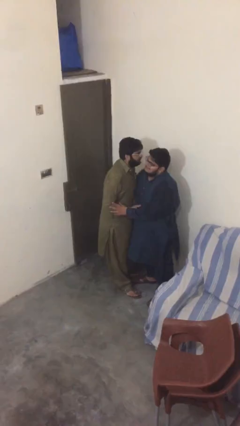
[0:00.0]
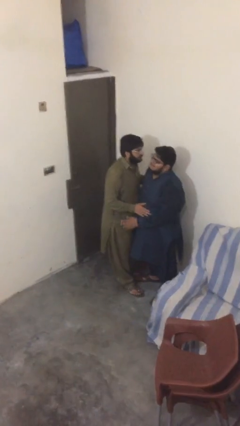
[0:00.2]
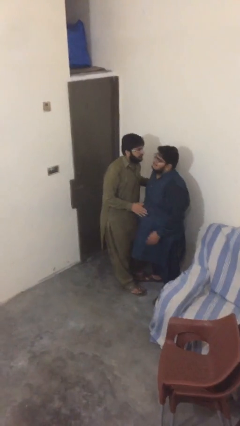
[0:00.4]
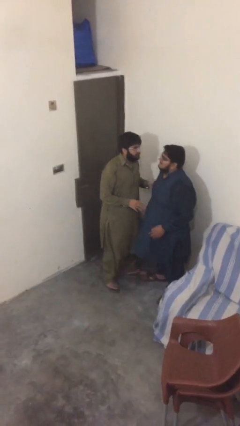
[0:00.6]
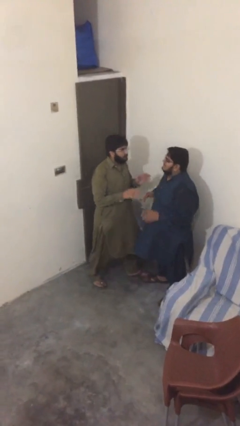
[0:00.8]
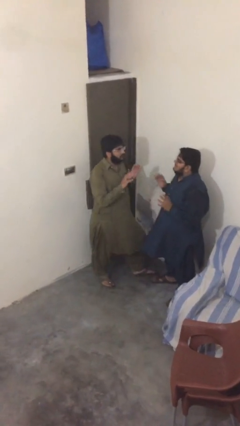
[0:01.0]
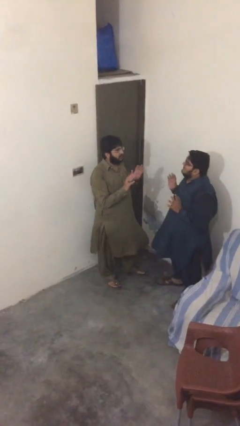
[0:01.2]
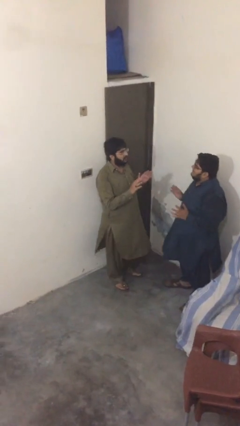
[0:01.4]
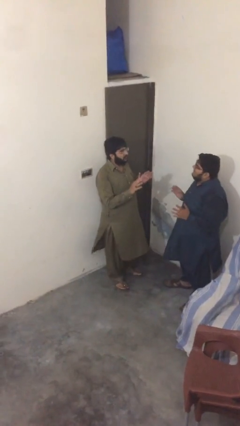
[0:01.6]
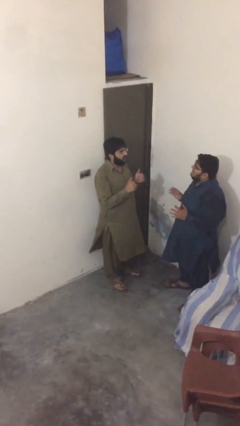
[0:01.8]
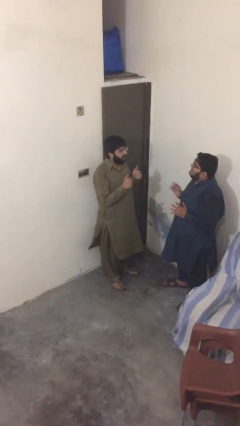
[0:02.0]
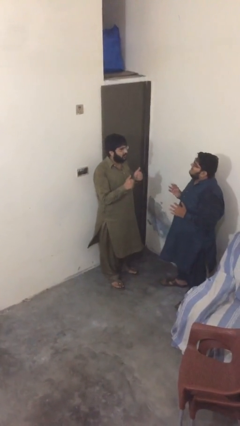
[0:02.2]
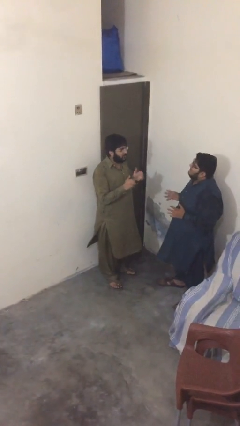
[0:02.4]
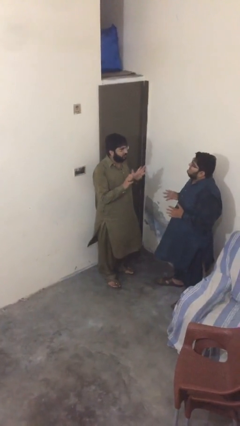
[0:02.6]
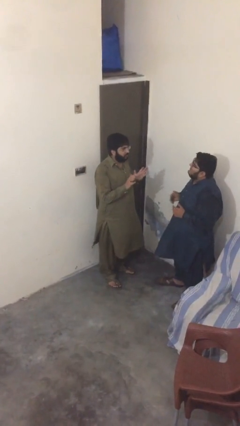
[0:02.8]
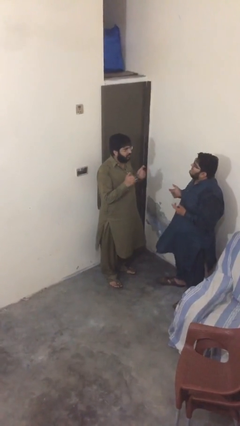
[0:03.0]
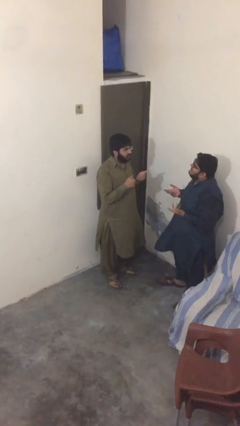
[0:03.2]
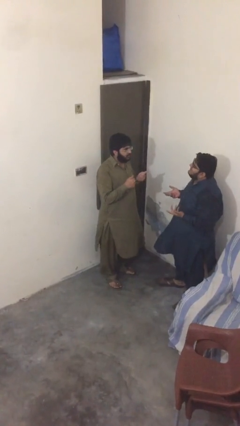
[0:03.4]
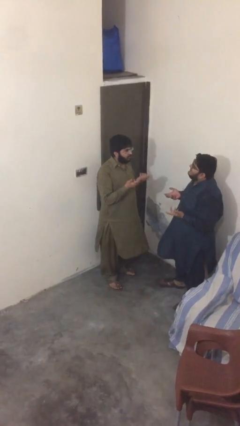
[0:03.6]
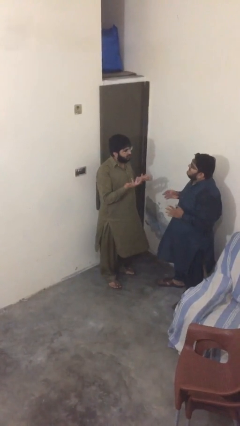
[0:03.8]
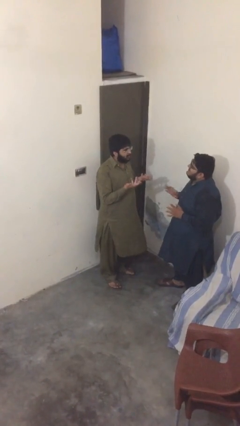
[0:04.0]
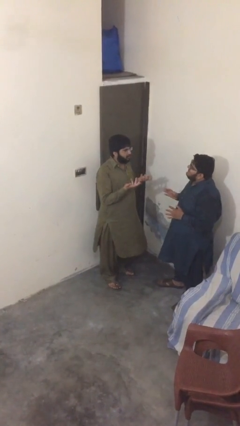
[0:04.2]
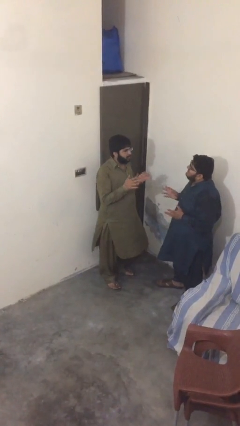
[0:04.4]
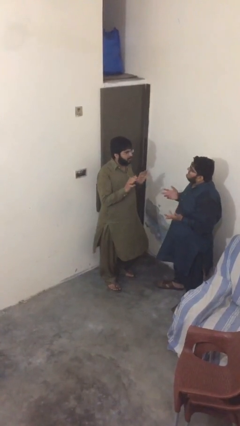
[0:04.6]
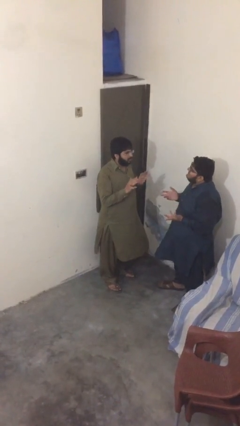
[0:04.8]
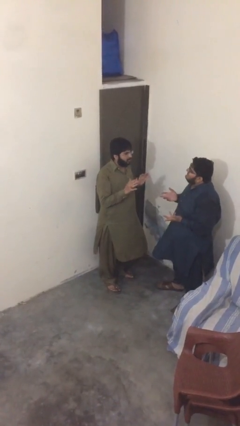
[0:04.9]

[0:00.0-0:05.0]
person talks to person

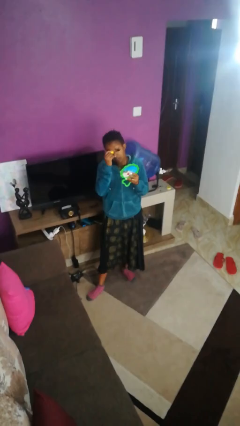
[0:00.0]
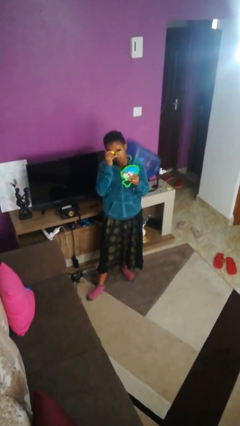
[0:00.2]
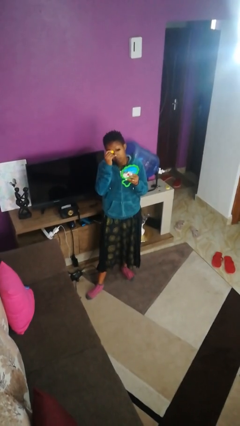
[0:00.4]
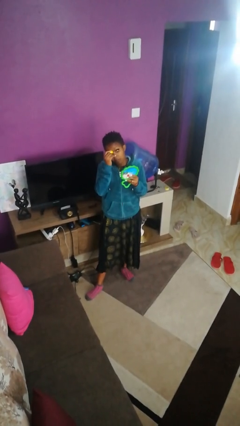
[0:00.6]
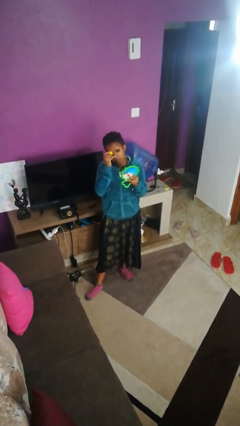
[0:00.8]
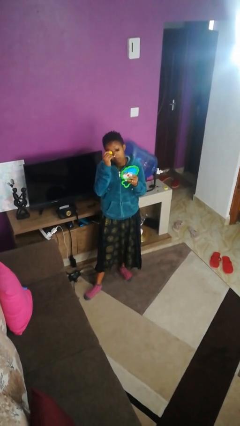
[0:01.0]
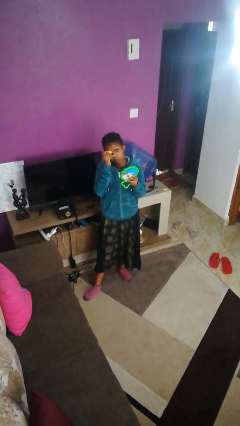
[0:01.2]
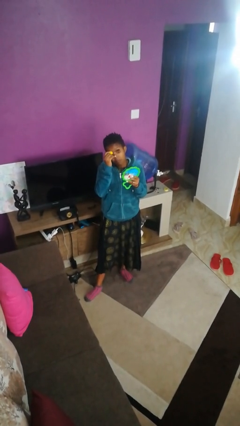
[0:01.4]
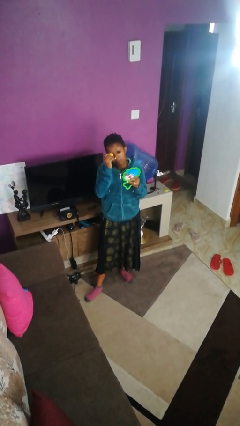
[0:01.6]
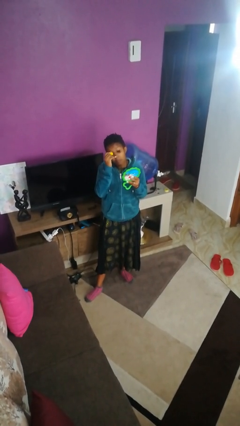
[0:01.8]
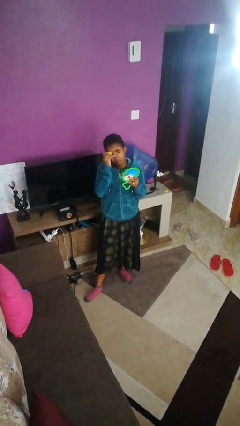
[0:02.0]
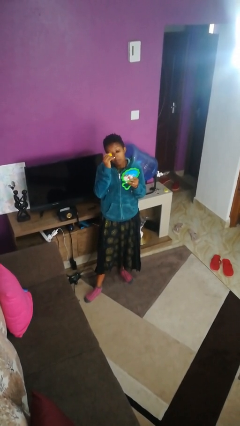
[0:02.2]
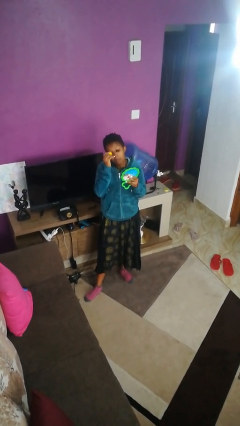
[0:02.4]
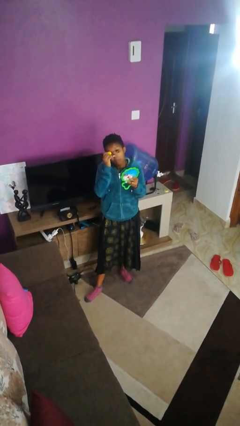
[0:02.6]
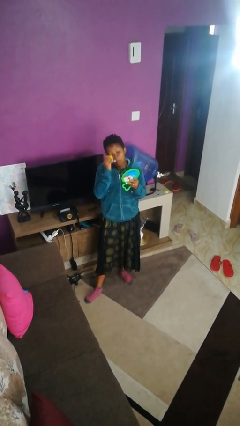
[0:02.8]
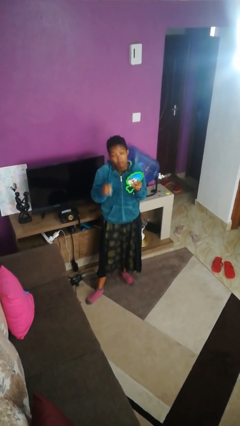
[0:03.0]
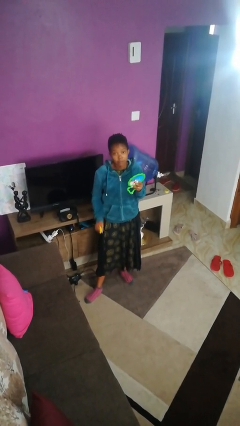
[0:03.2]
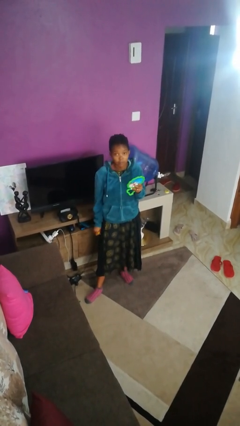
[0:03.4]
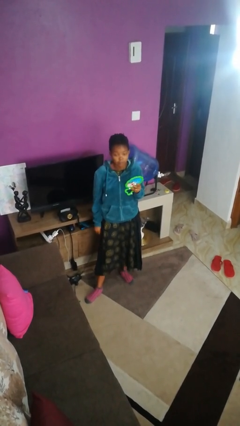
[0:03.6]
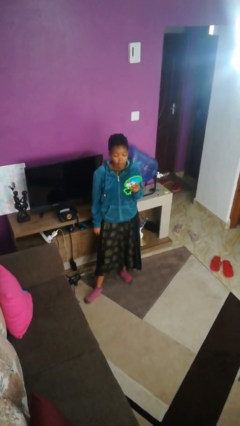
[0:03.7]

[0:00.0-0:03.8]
person applies eye makeup

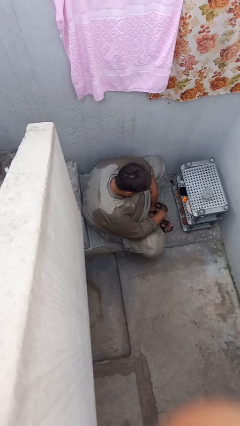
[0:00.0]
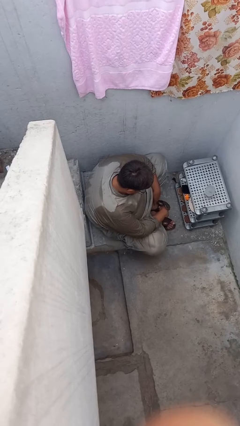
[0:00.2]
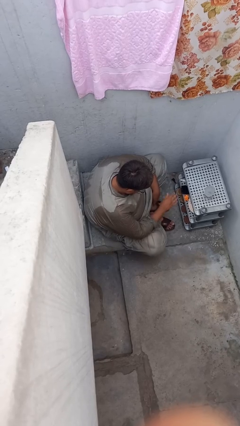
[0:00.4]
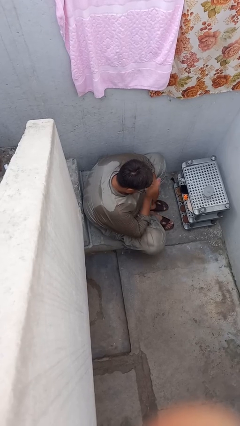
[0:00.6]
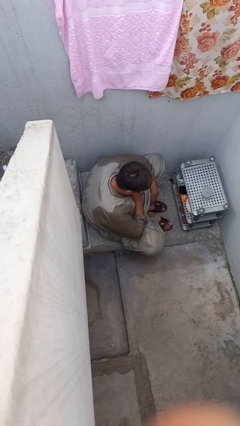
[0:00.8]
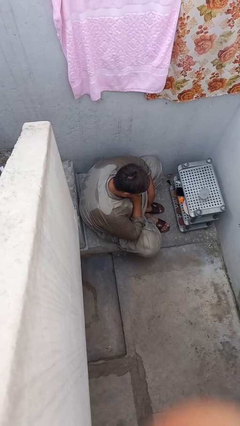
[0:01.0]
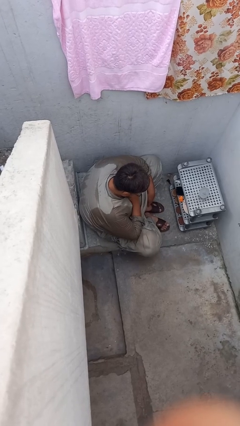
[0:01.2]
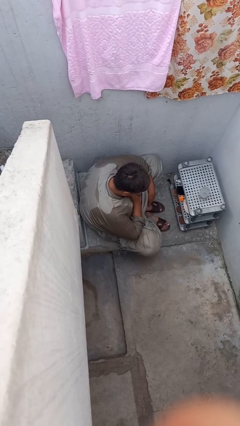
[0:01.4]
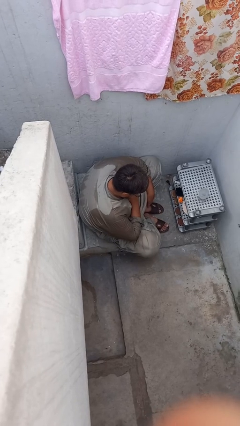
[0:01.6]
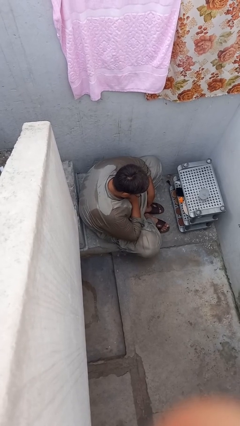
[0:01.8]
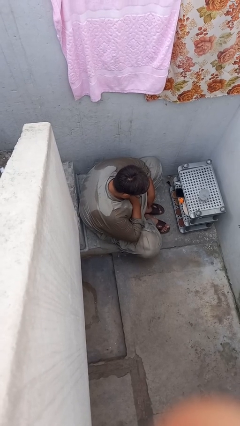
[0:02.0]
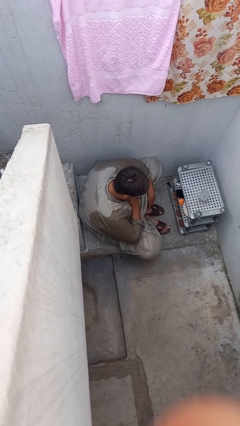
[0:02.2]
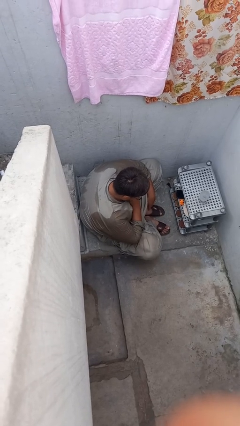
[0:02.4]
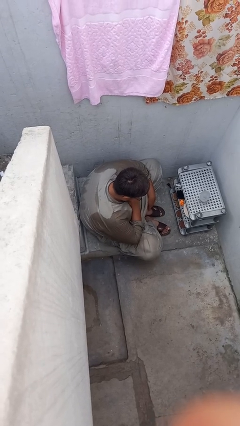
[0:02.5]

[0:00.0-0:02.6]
person drums on chest

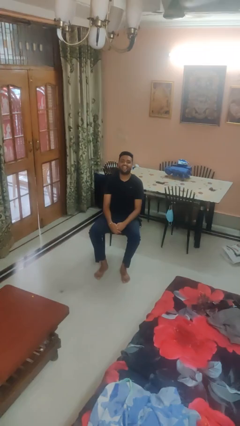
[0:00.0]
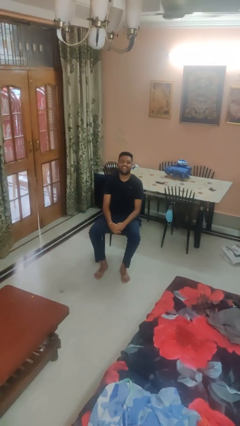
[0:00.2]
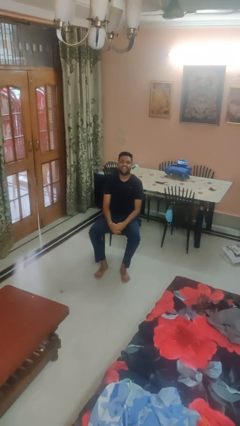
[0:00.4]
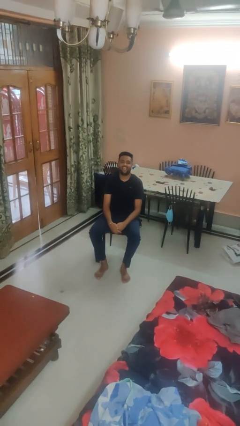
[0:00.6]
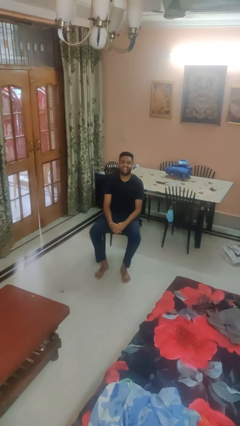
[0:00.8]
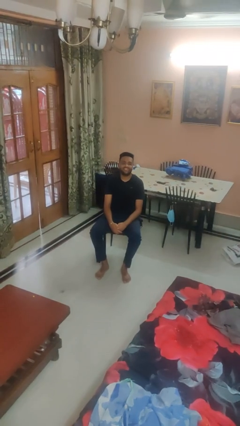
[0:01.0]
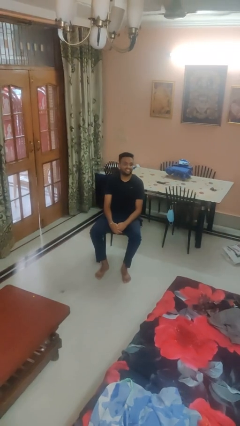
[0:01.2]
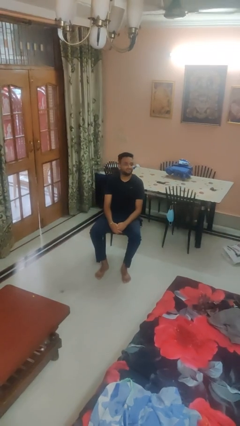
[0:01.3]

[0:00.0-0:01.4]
person sticks out tongue

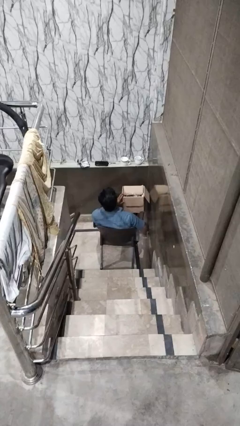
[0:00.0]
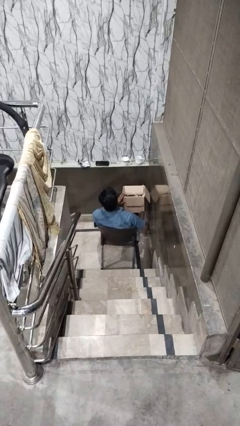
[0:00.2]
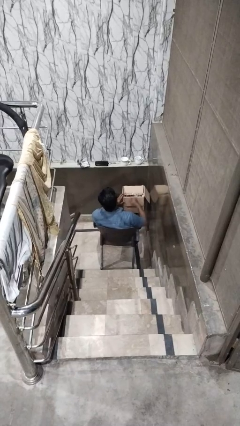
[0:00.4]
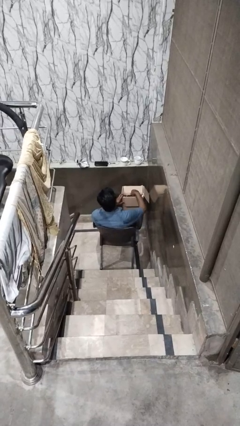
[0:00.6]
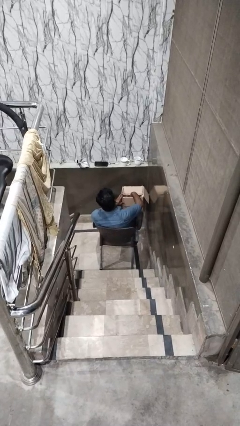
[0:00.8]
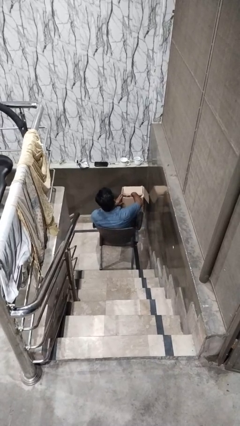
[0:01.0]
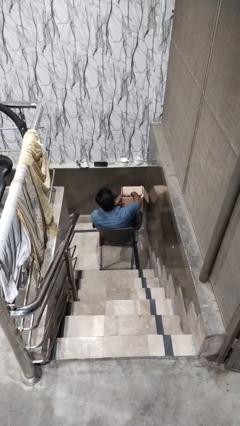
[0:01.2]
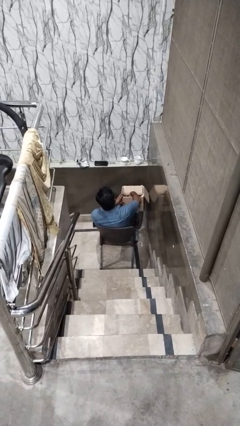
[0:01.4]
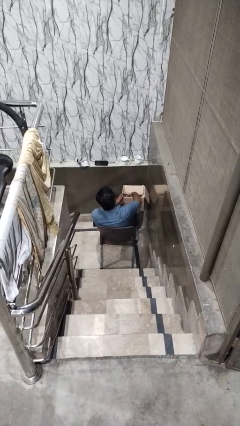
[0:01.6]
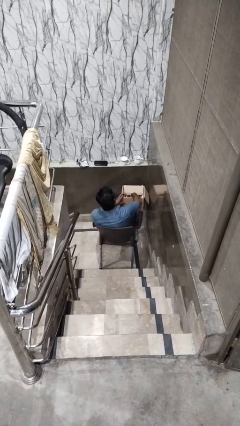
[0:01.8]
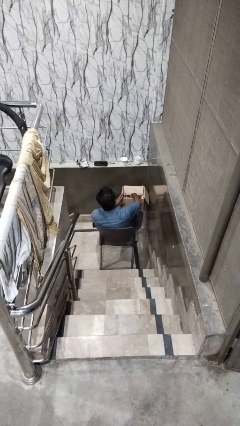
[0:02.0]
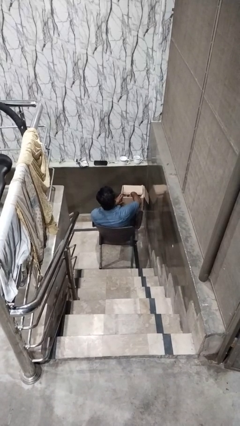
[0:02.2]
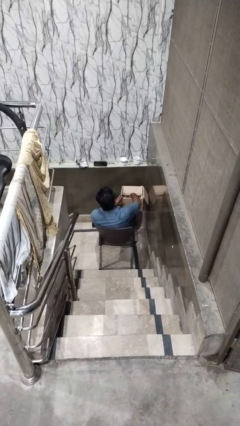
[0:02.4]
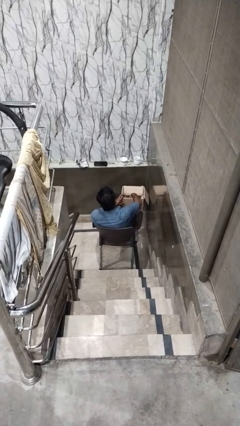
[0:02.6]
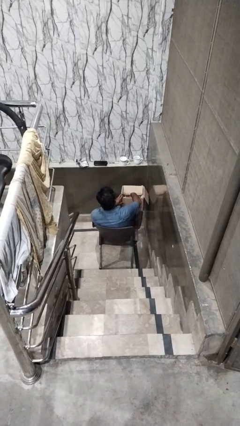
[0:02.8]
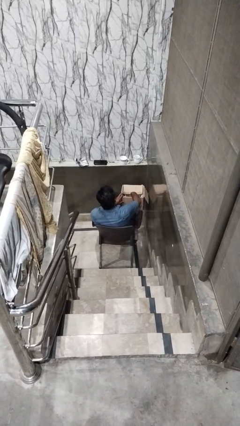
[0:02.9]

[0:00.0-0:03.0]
person searches in box

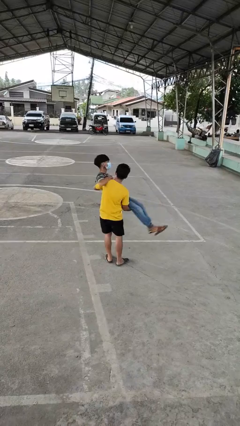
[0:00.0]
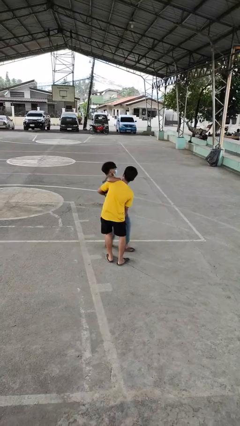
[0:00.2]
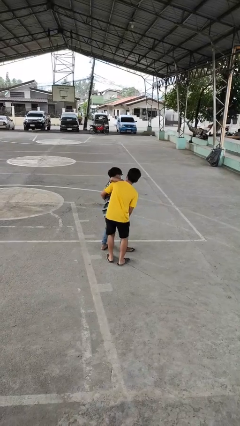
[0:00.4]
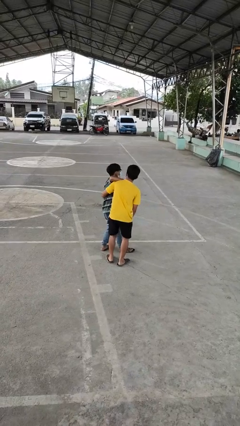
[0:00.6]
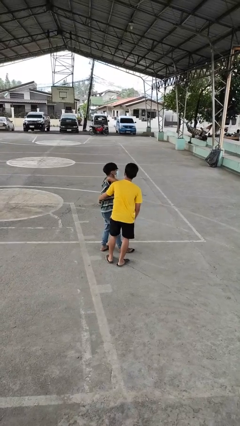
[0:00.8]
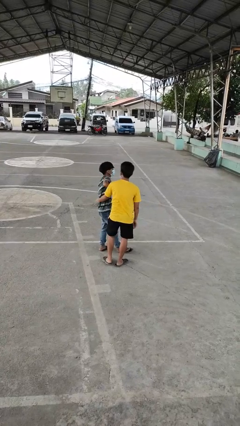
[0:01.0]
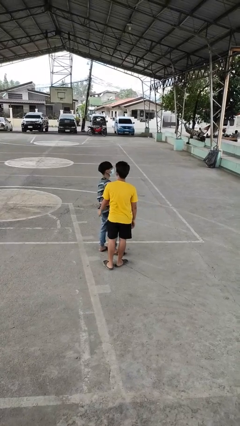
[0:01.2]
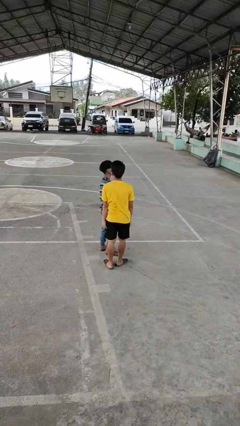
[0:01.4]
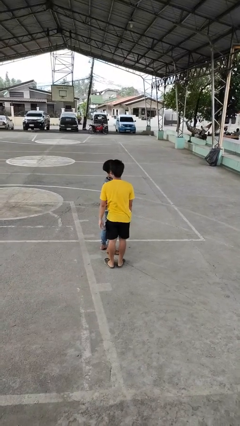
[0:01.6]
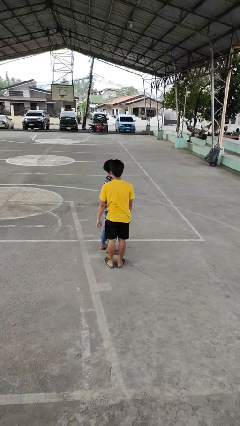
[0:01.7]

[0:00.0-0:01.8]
person puts down person
